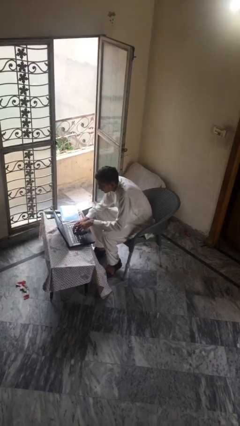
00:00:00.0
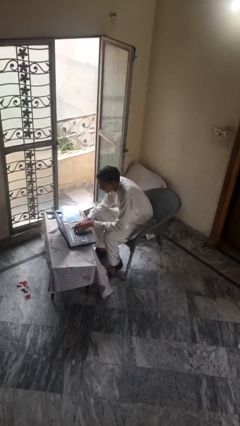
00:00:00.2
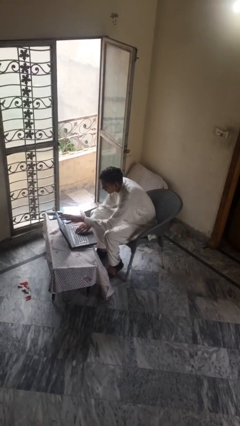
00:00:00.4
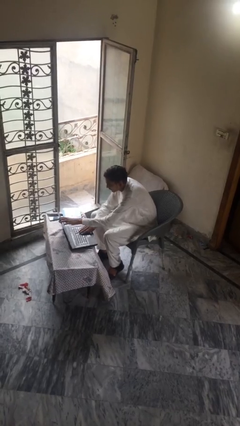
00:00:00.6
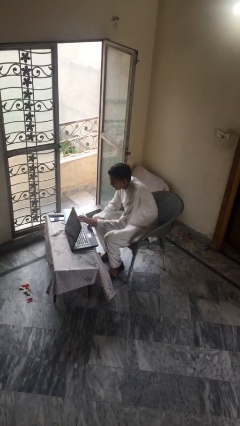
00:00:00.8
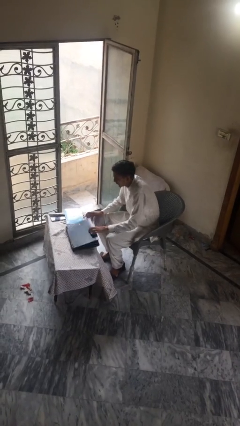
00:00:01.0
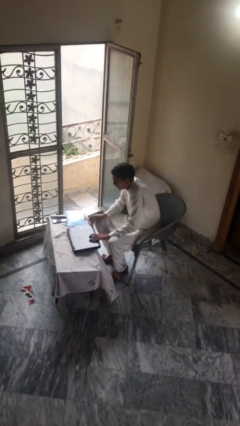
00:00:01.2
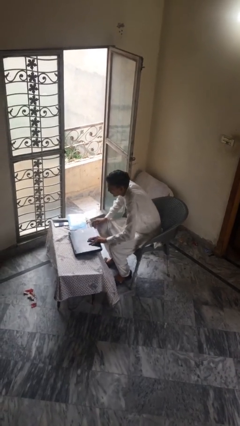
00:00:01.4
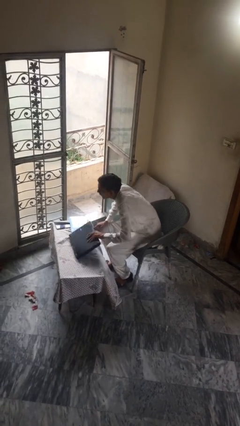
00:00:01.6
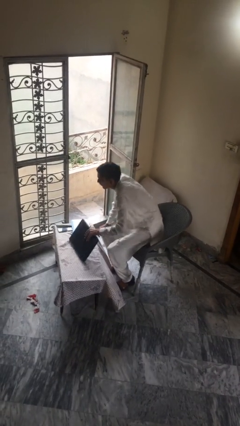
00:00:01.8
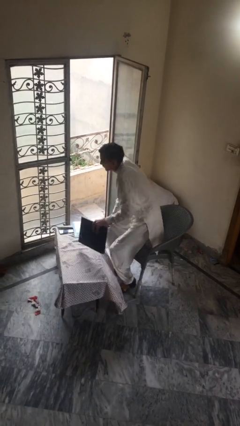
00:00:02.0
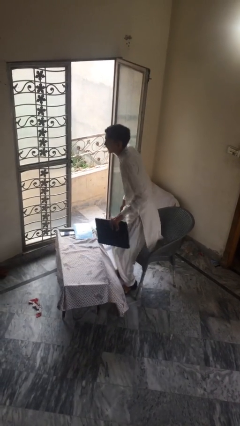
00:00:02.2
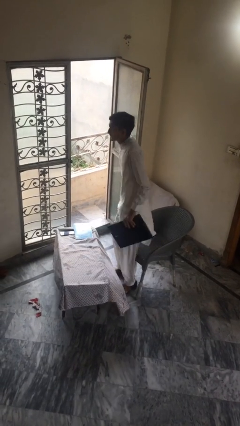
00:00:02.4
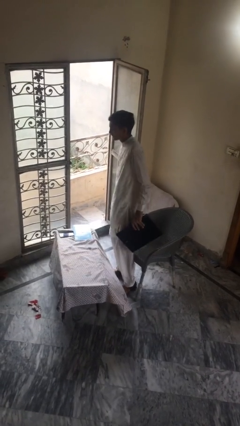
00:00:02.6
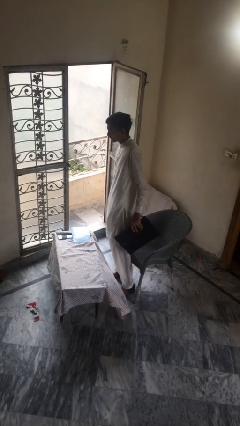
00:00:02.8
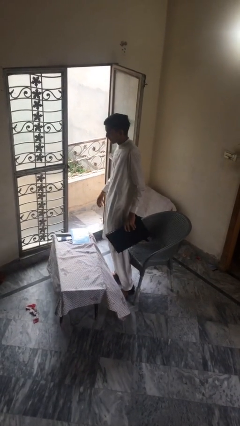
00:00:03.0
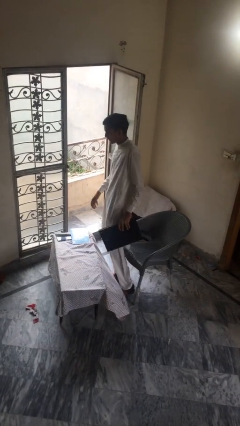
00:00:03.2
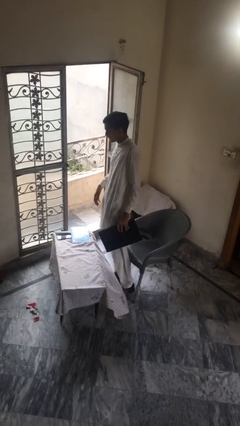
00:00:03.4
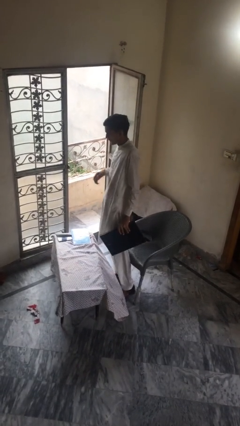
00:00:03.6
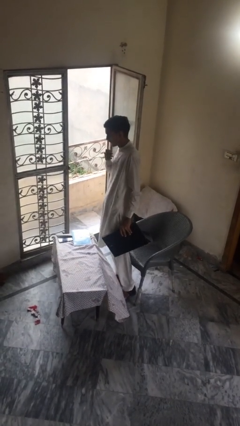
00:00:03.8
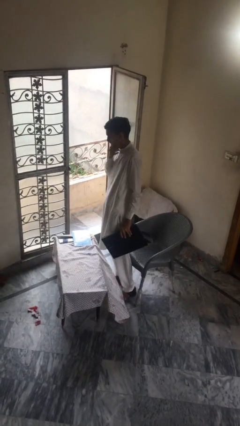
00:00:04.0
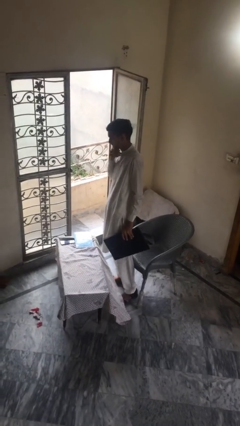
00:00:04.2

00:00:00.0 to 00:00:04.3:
person stands up

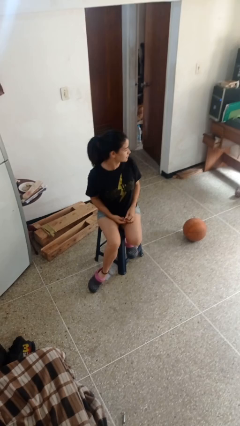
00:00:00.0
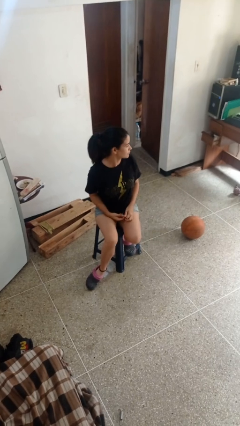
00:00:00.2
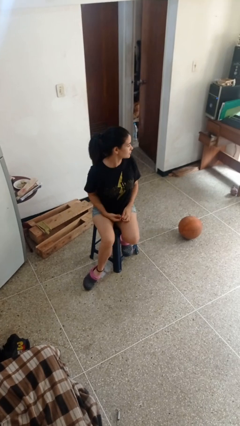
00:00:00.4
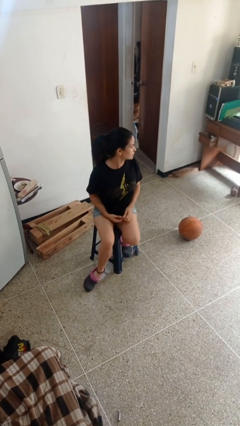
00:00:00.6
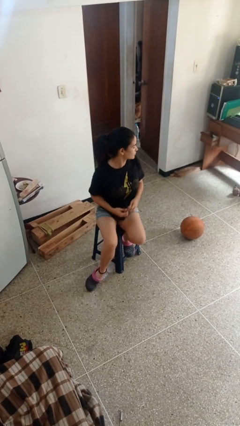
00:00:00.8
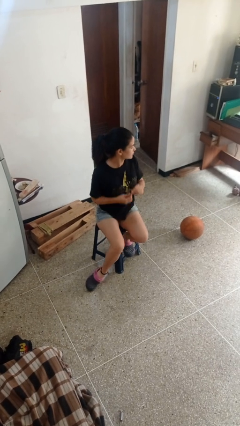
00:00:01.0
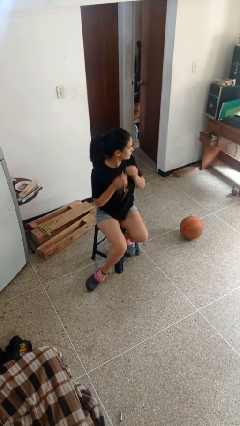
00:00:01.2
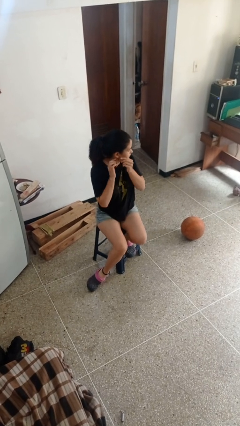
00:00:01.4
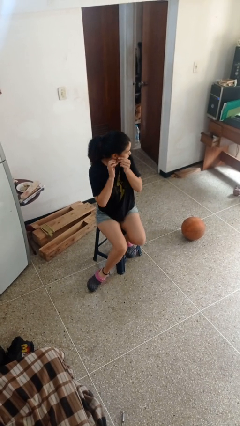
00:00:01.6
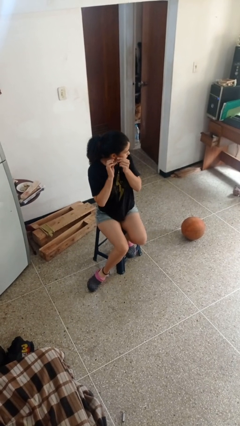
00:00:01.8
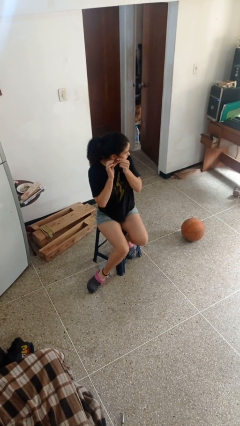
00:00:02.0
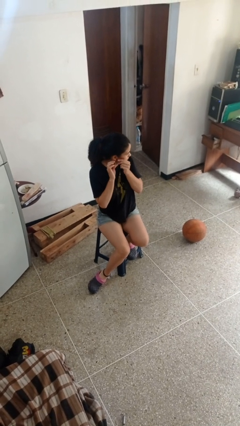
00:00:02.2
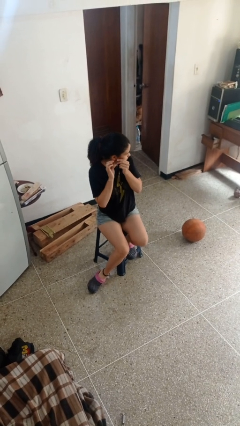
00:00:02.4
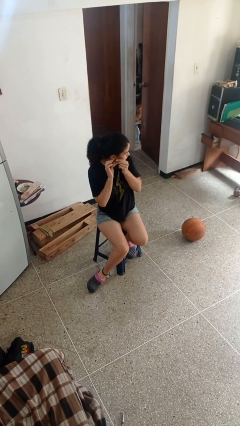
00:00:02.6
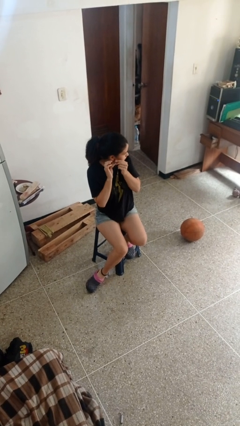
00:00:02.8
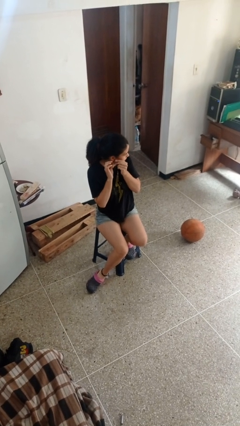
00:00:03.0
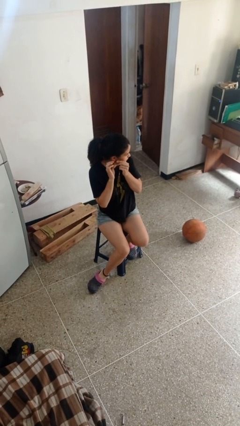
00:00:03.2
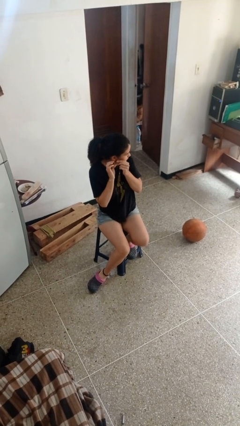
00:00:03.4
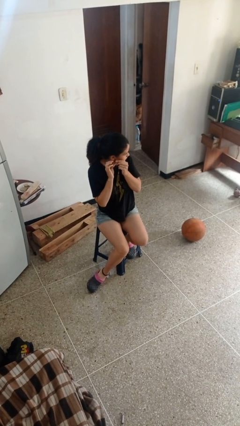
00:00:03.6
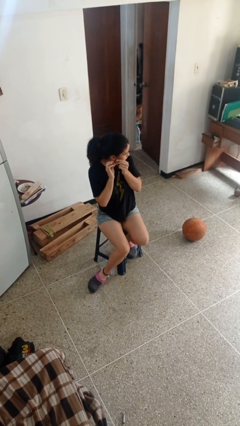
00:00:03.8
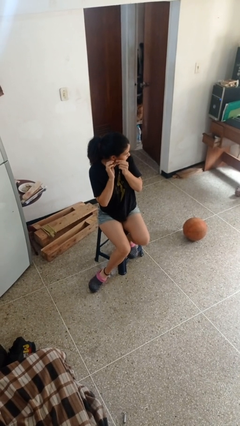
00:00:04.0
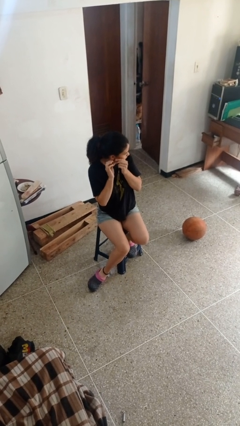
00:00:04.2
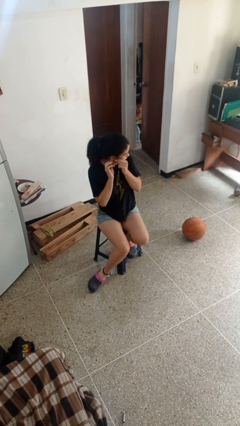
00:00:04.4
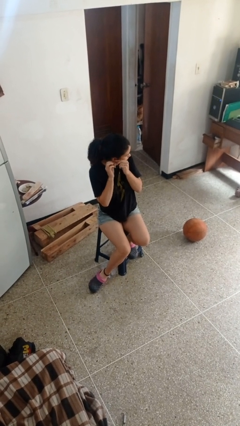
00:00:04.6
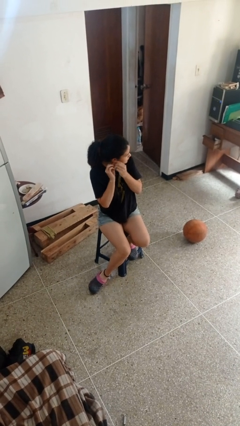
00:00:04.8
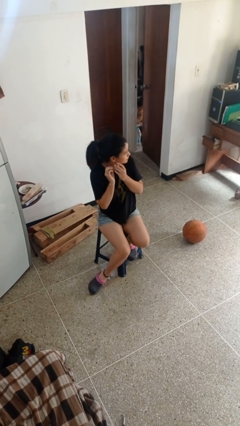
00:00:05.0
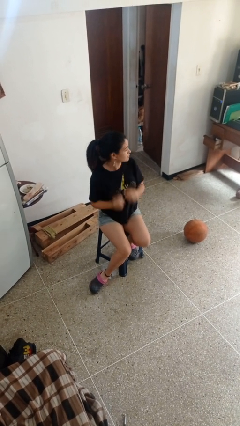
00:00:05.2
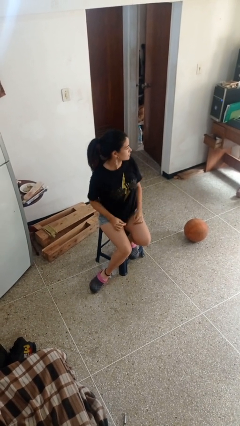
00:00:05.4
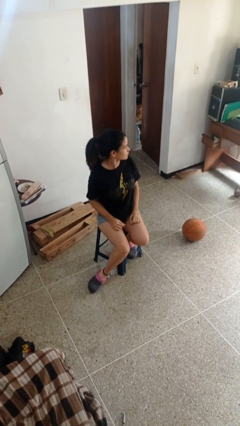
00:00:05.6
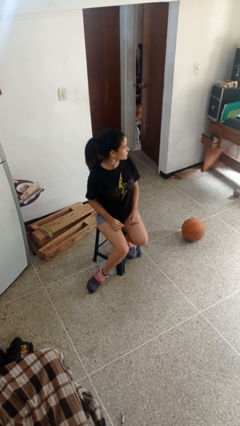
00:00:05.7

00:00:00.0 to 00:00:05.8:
person puts on earrings

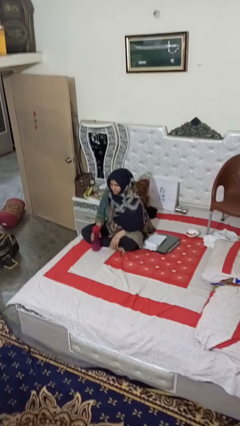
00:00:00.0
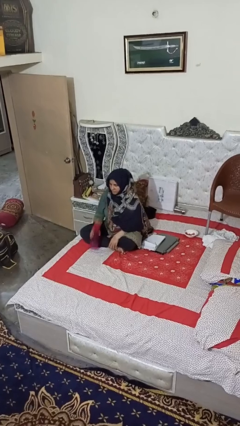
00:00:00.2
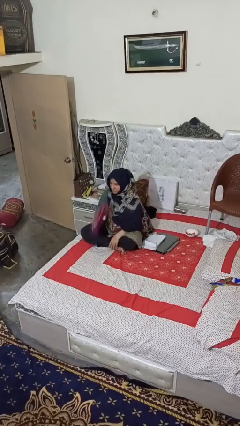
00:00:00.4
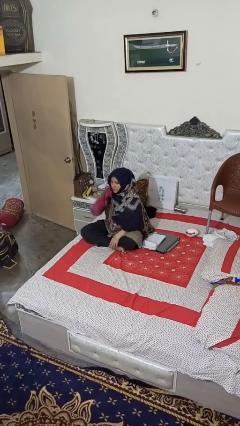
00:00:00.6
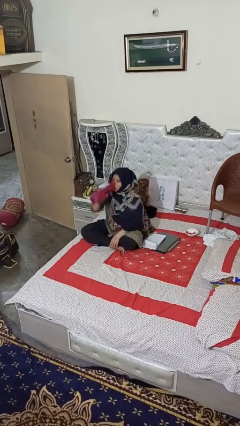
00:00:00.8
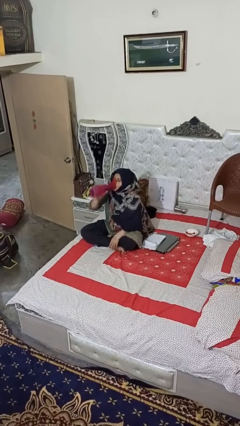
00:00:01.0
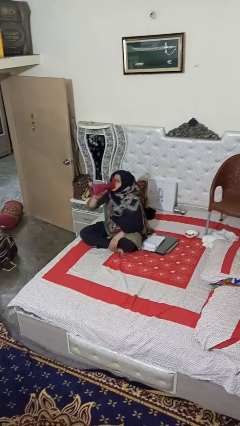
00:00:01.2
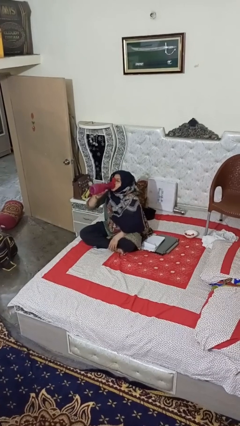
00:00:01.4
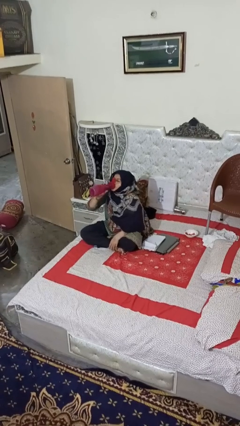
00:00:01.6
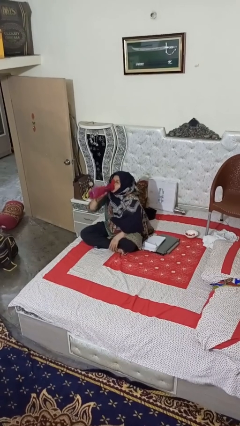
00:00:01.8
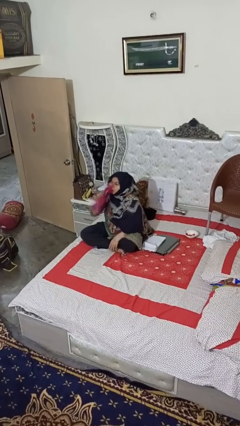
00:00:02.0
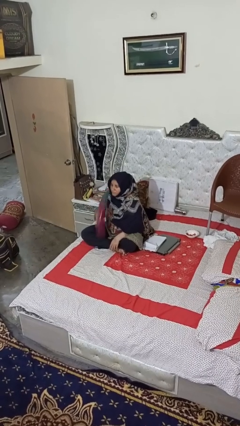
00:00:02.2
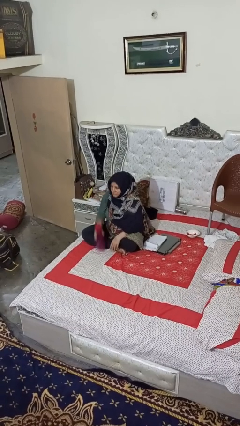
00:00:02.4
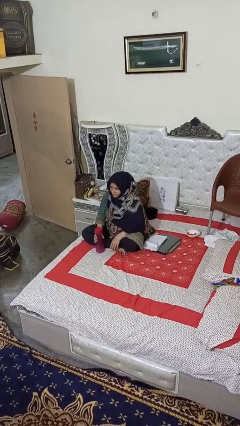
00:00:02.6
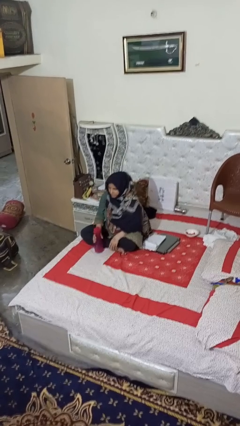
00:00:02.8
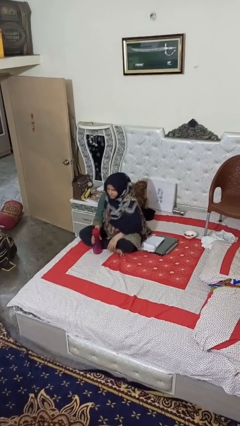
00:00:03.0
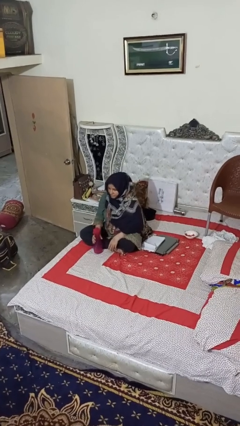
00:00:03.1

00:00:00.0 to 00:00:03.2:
person drinks from bottle

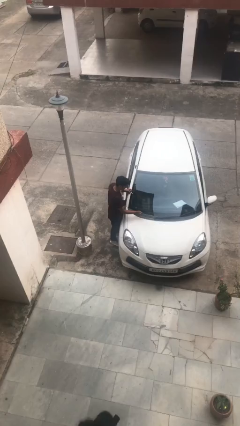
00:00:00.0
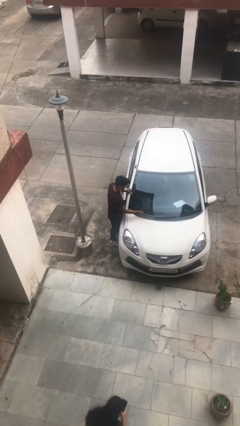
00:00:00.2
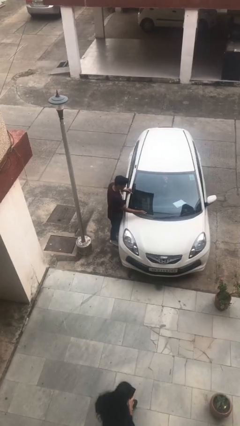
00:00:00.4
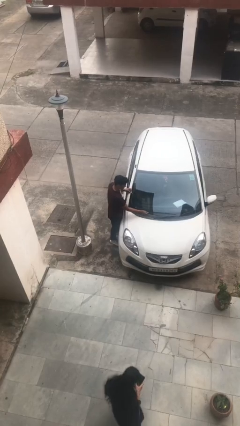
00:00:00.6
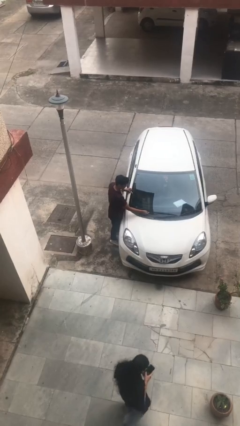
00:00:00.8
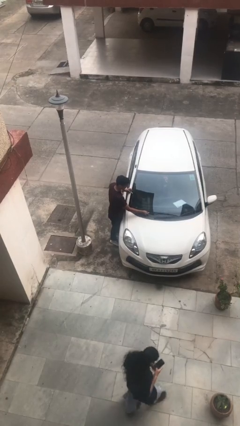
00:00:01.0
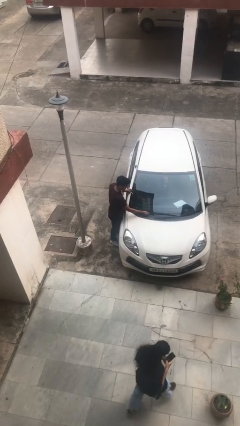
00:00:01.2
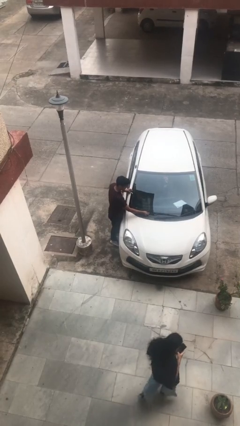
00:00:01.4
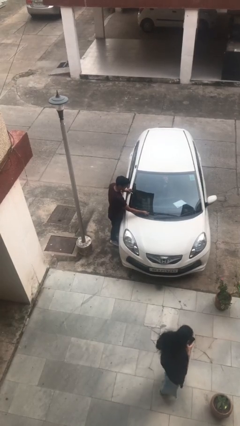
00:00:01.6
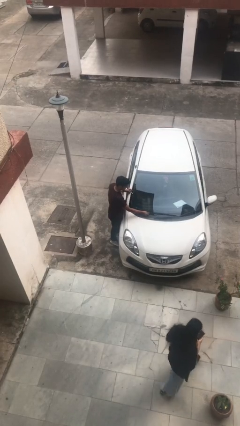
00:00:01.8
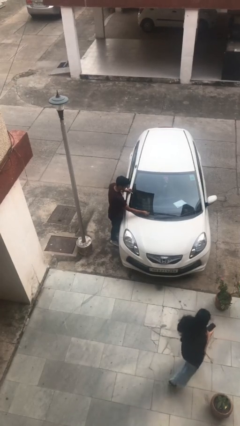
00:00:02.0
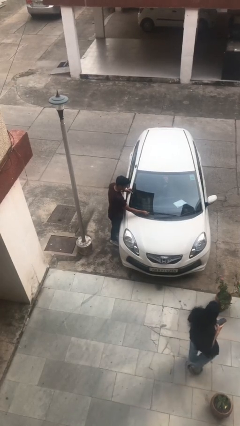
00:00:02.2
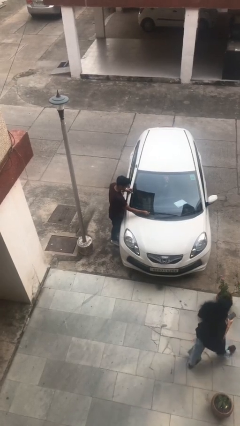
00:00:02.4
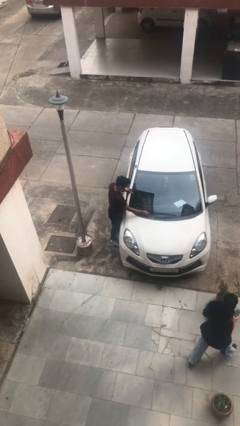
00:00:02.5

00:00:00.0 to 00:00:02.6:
person flips down car wipers

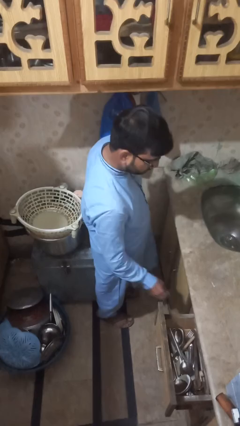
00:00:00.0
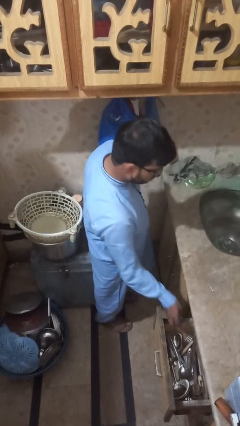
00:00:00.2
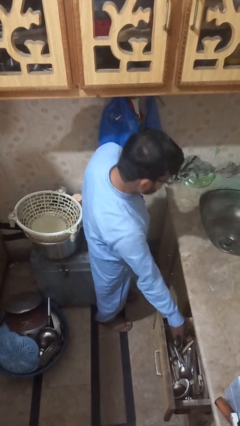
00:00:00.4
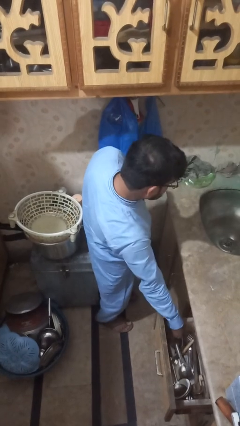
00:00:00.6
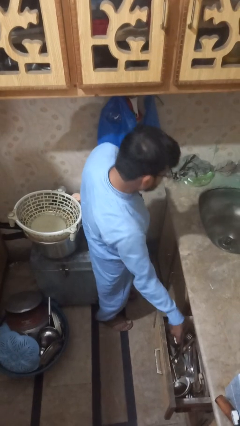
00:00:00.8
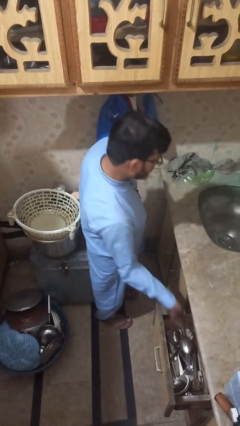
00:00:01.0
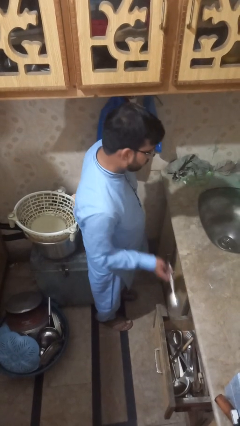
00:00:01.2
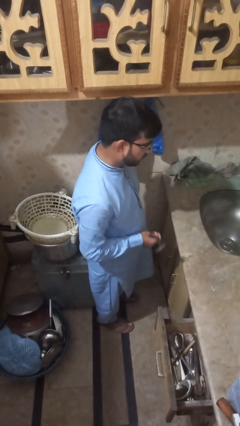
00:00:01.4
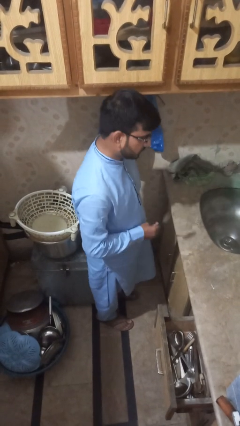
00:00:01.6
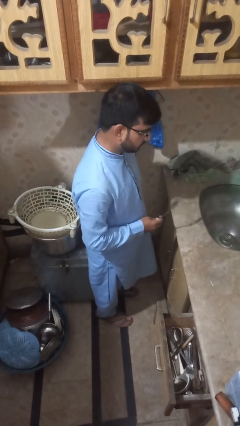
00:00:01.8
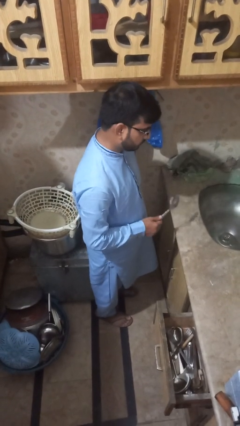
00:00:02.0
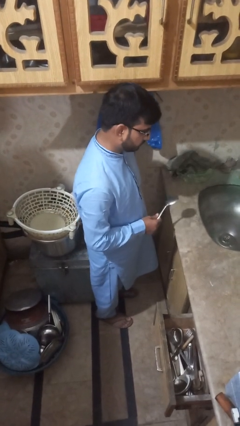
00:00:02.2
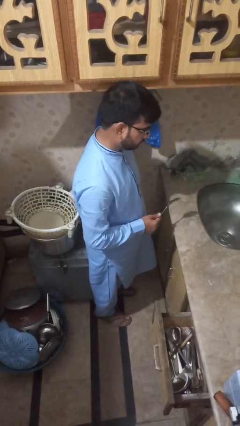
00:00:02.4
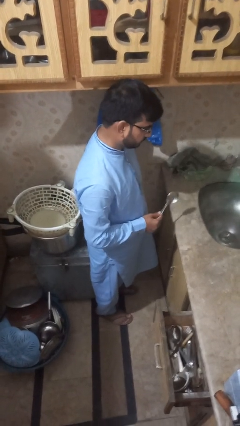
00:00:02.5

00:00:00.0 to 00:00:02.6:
person takes object from kitchen drawer
